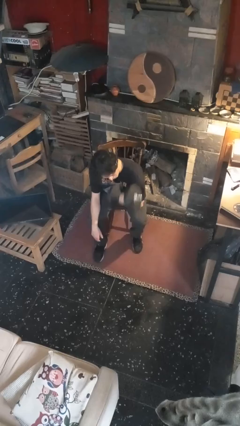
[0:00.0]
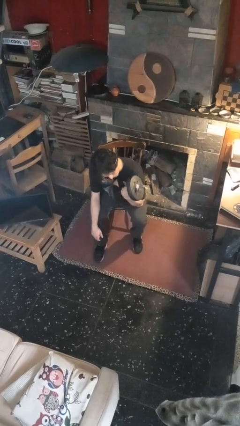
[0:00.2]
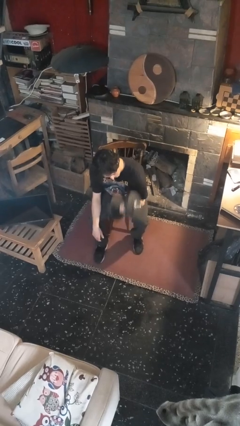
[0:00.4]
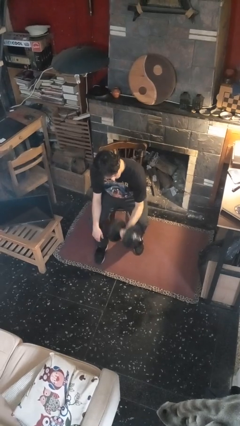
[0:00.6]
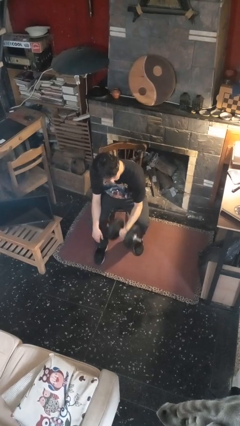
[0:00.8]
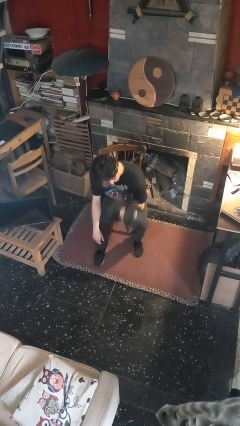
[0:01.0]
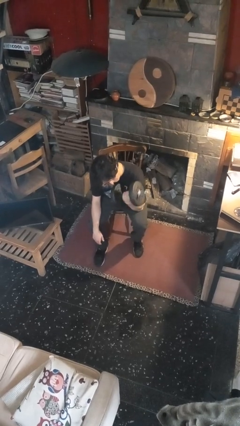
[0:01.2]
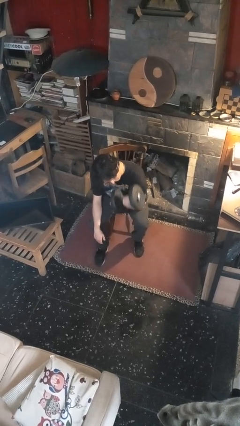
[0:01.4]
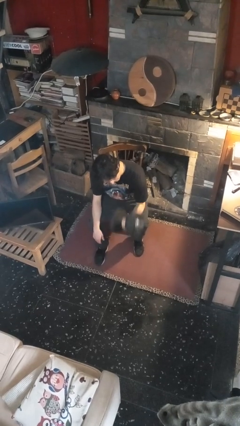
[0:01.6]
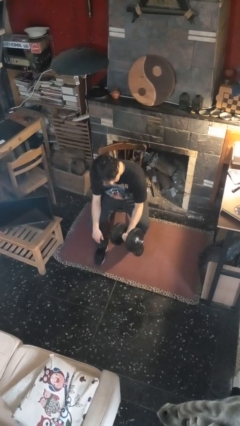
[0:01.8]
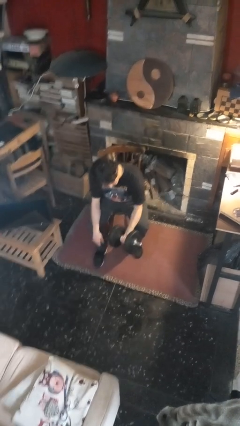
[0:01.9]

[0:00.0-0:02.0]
person lifts dumbbells

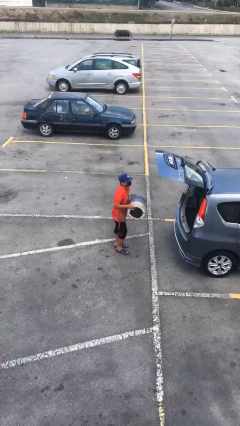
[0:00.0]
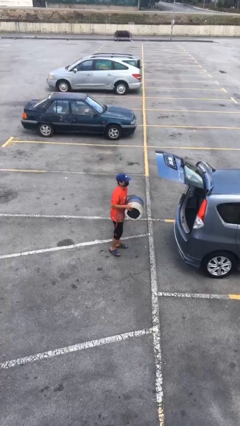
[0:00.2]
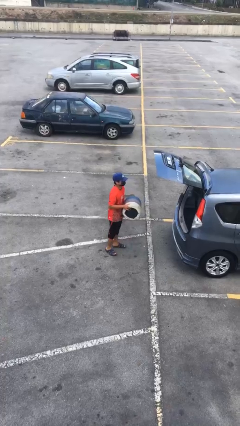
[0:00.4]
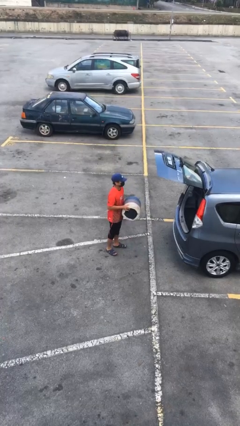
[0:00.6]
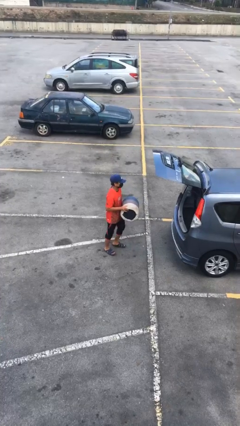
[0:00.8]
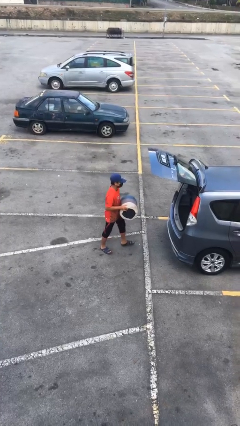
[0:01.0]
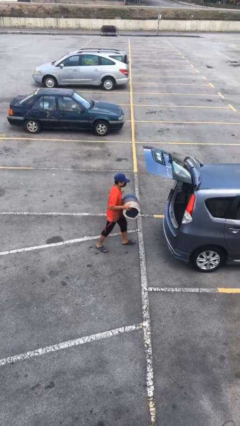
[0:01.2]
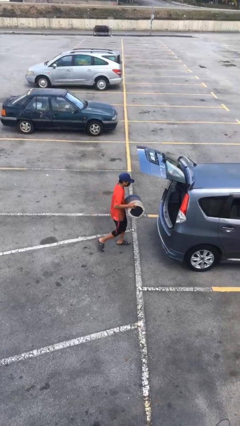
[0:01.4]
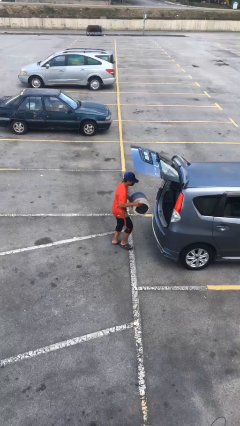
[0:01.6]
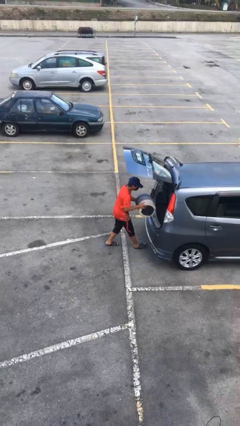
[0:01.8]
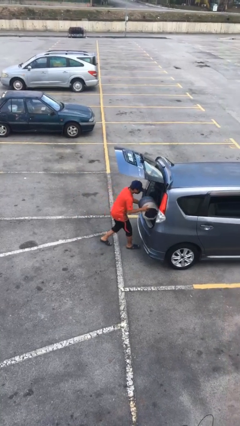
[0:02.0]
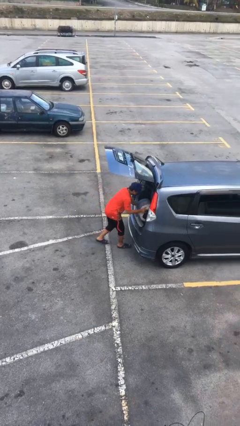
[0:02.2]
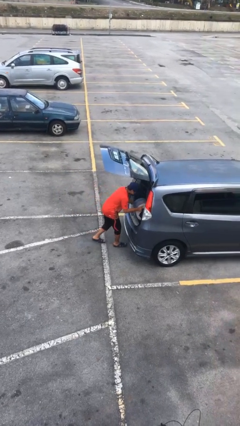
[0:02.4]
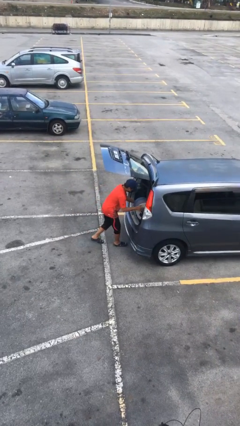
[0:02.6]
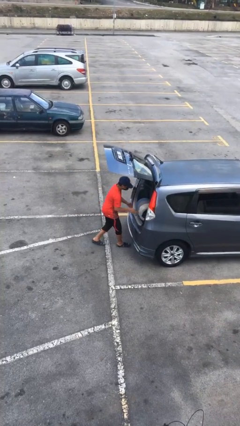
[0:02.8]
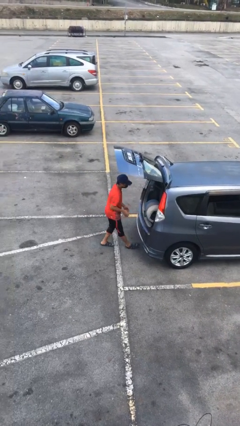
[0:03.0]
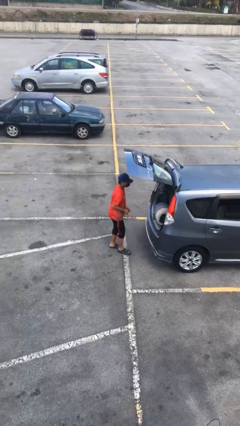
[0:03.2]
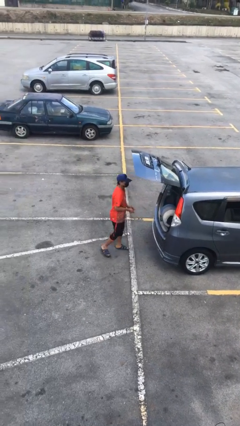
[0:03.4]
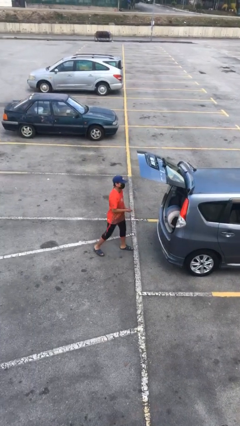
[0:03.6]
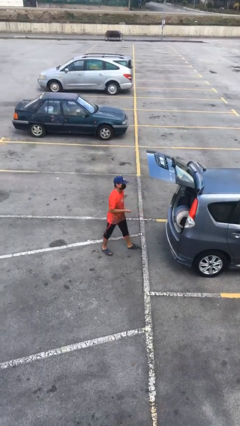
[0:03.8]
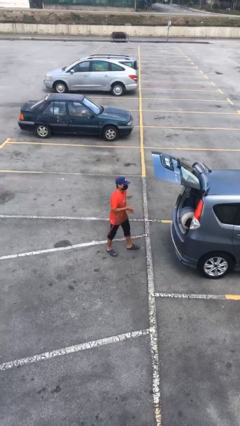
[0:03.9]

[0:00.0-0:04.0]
person loads car

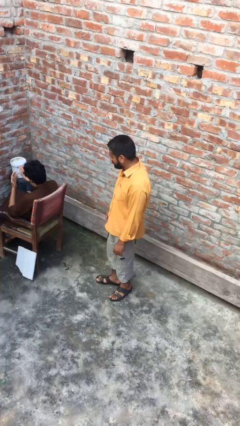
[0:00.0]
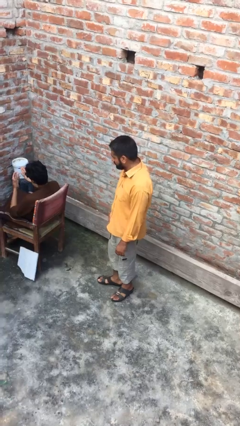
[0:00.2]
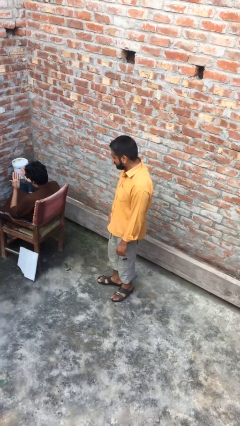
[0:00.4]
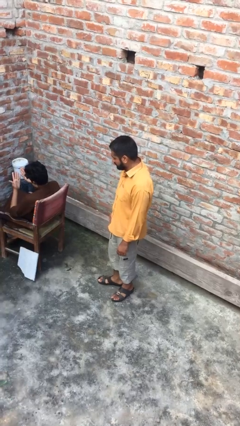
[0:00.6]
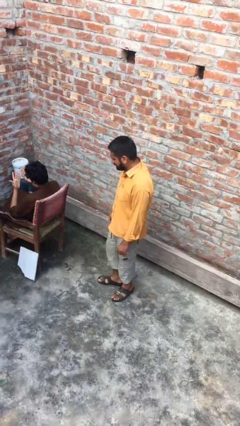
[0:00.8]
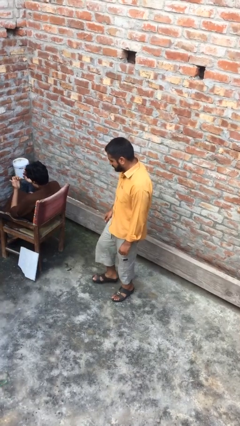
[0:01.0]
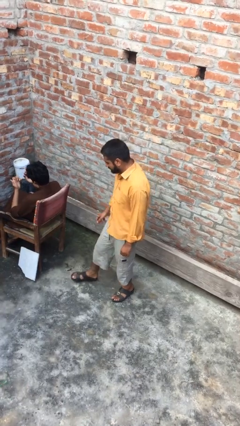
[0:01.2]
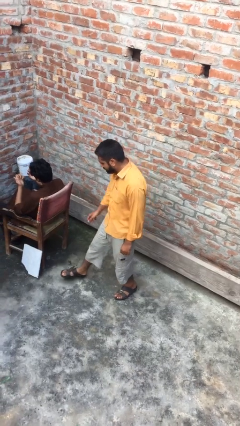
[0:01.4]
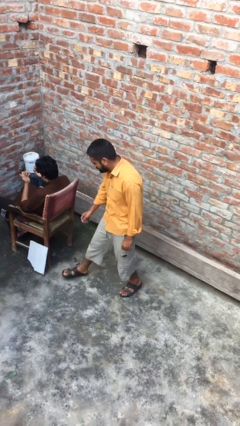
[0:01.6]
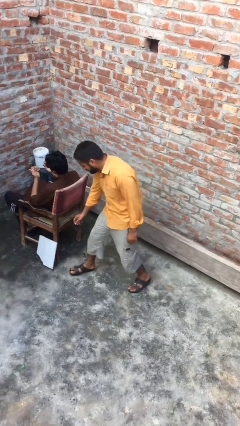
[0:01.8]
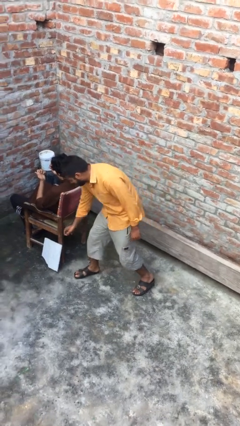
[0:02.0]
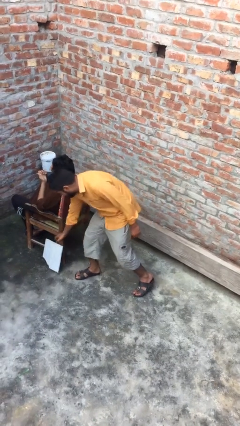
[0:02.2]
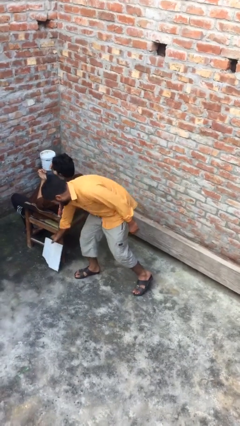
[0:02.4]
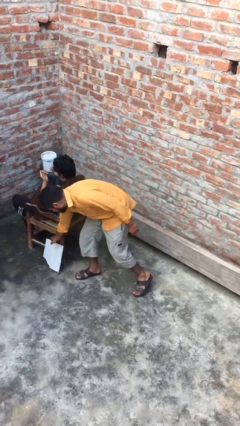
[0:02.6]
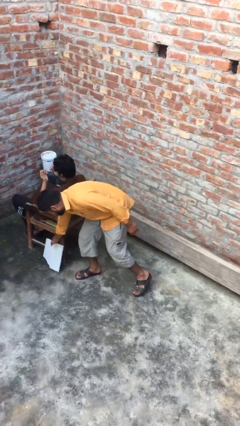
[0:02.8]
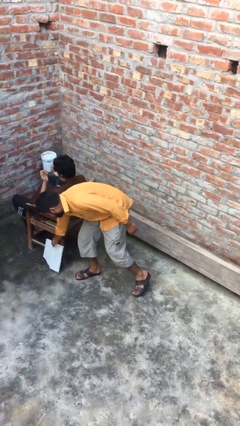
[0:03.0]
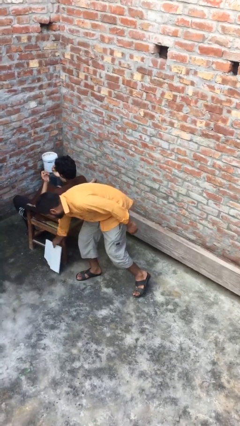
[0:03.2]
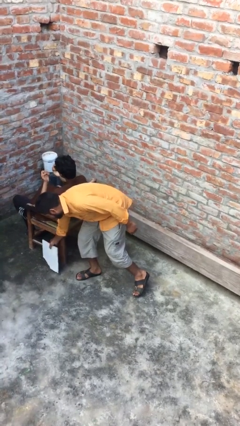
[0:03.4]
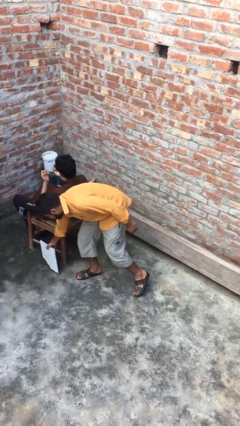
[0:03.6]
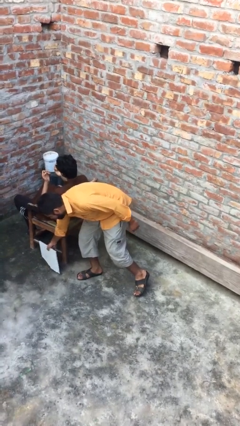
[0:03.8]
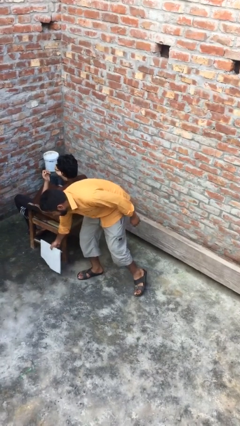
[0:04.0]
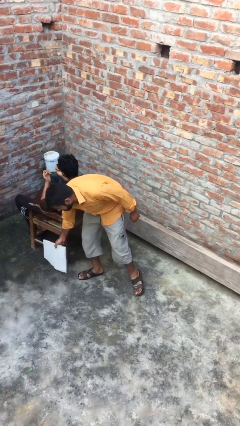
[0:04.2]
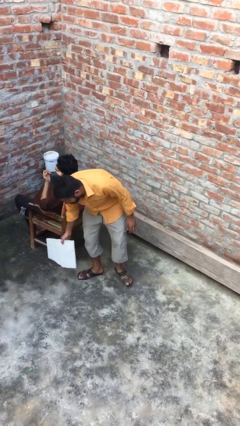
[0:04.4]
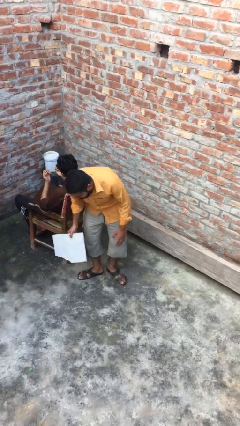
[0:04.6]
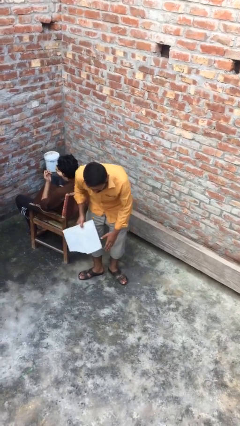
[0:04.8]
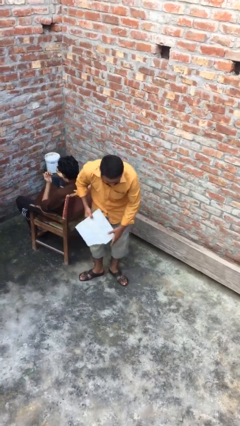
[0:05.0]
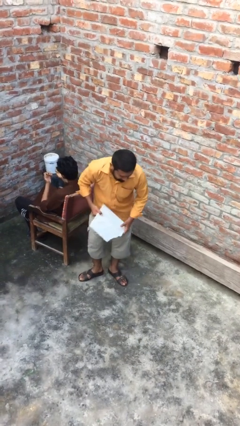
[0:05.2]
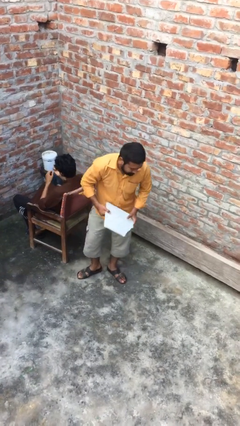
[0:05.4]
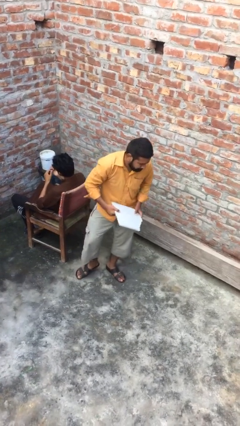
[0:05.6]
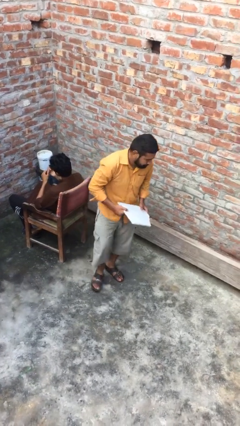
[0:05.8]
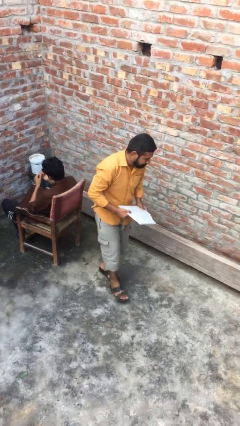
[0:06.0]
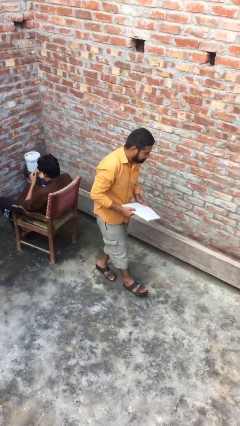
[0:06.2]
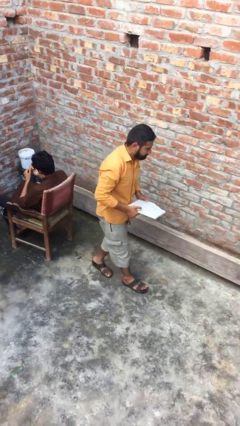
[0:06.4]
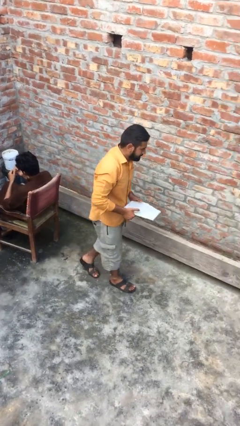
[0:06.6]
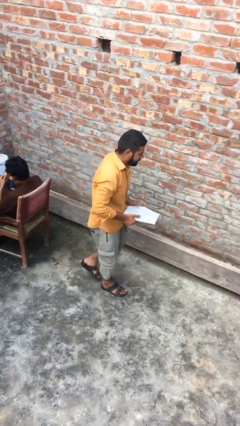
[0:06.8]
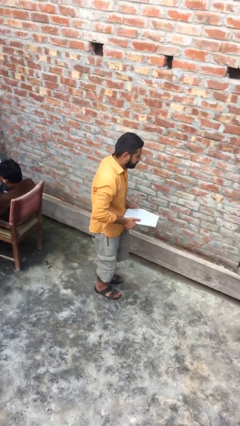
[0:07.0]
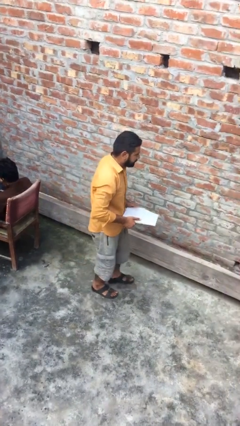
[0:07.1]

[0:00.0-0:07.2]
person steals object from person

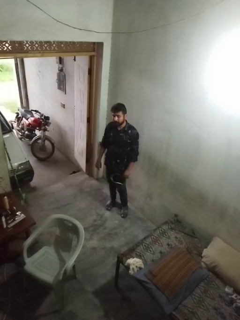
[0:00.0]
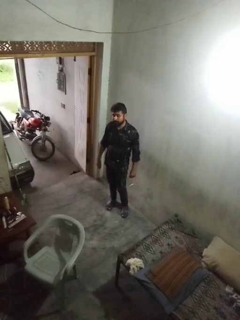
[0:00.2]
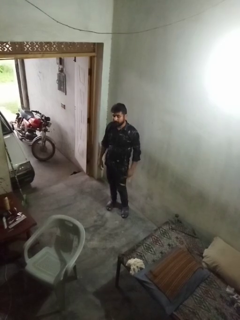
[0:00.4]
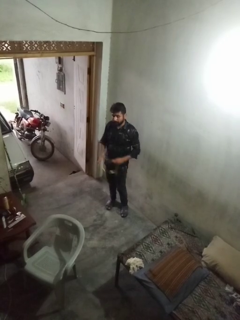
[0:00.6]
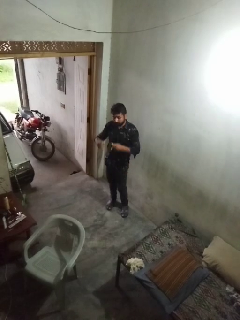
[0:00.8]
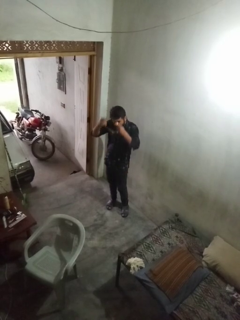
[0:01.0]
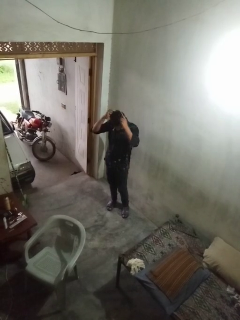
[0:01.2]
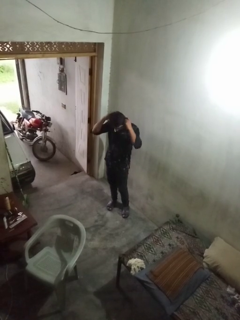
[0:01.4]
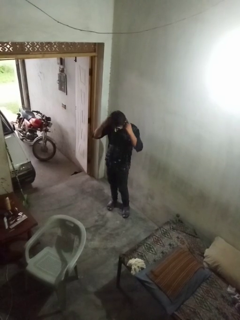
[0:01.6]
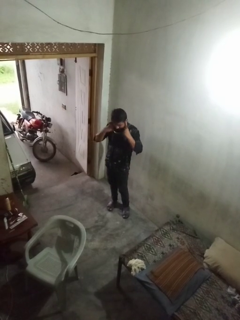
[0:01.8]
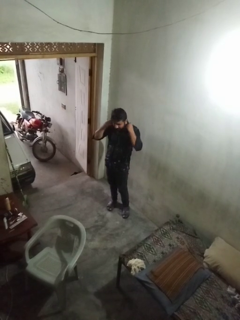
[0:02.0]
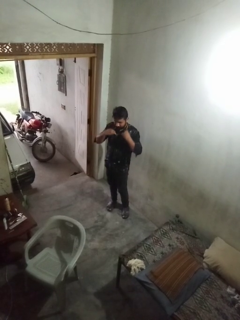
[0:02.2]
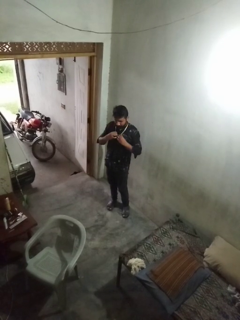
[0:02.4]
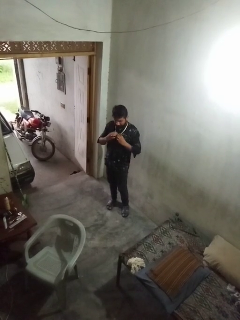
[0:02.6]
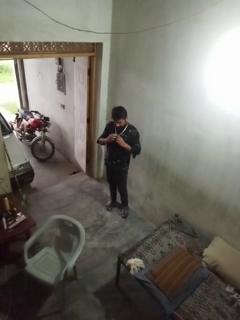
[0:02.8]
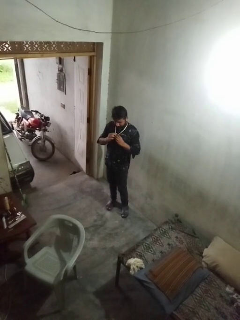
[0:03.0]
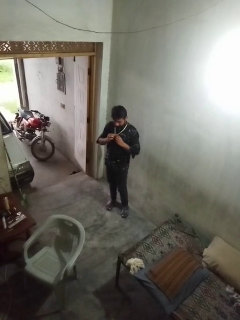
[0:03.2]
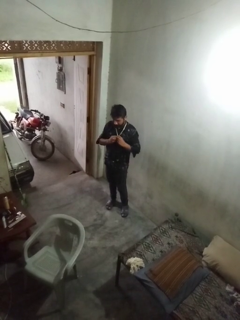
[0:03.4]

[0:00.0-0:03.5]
person puts on necklace

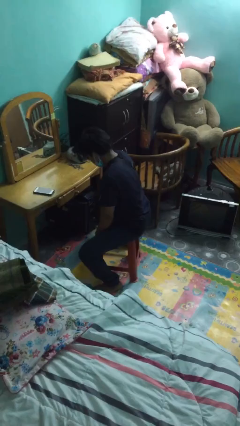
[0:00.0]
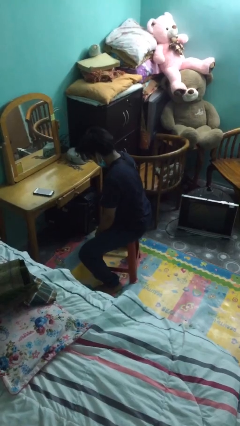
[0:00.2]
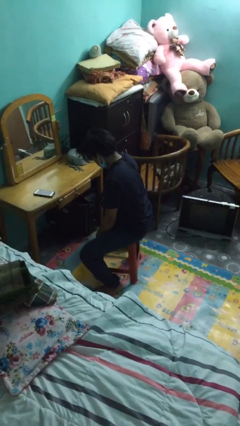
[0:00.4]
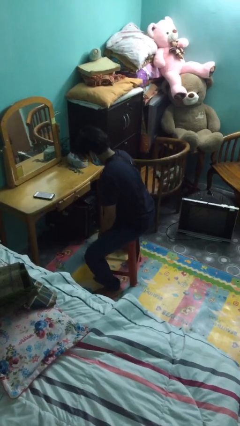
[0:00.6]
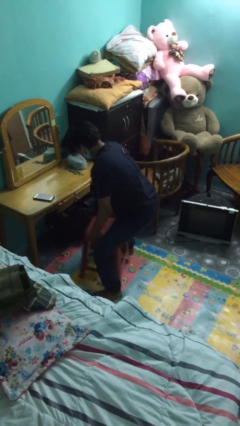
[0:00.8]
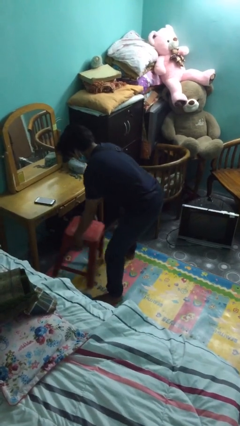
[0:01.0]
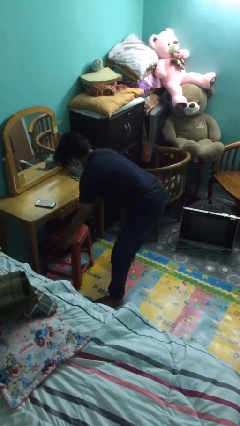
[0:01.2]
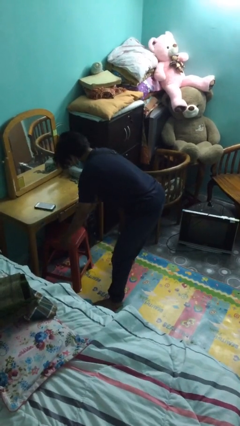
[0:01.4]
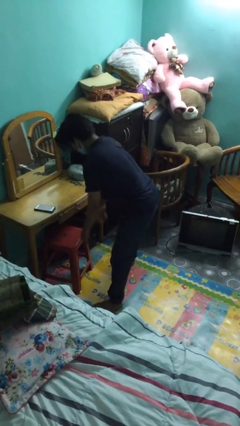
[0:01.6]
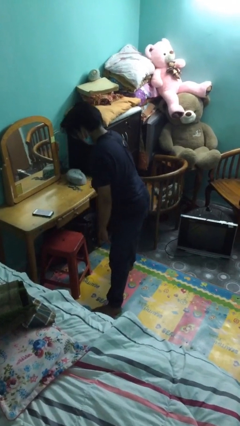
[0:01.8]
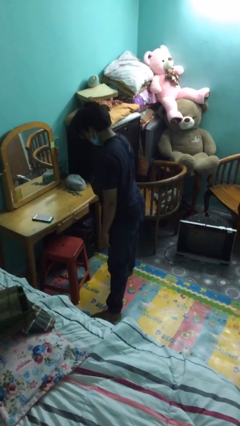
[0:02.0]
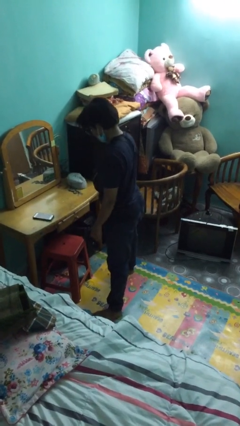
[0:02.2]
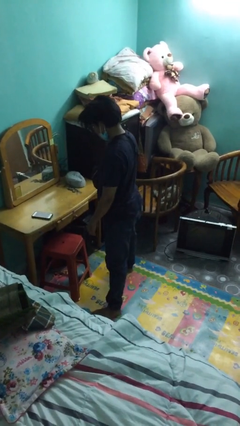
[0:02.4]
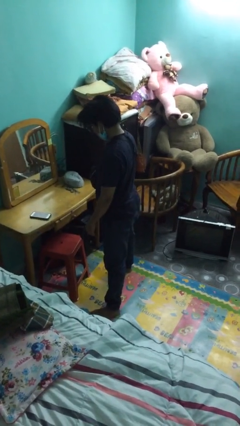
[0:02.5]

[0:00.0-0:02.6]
person stands up
